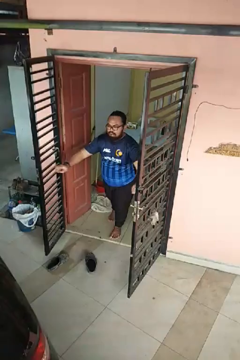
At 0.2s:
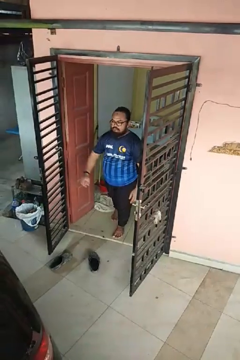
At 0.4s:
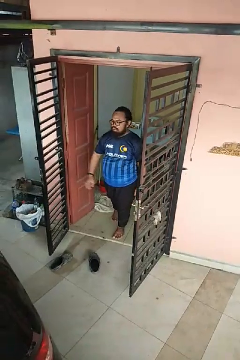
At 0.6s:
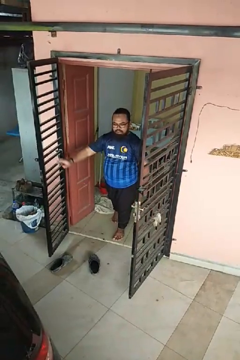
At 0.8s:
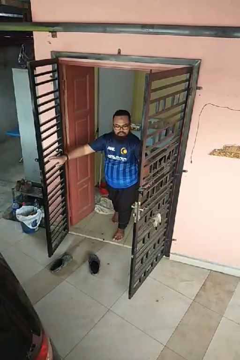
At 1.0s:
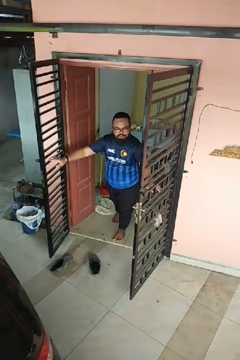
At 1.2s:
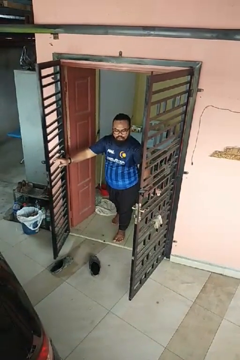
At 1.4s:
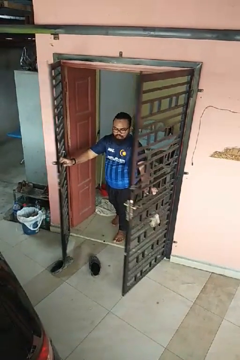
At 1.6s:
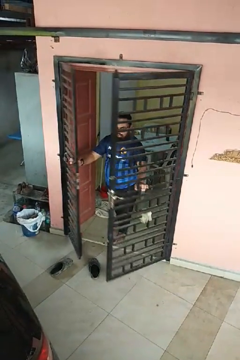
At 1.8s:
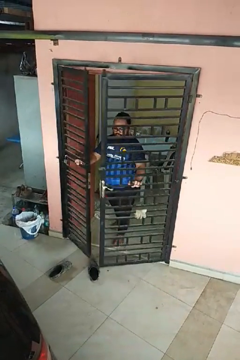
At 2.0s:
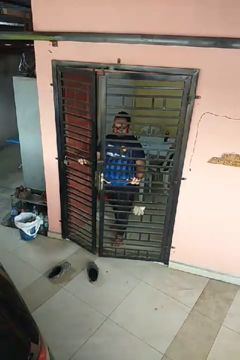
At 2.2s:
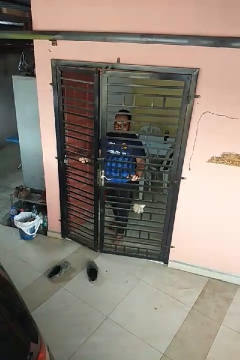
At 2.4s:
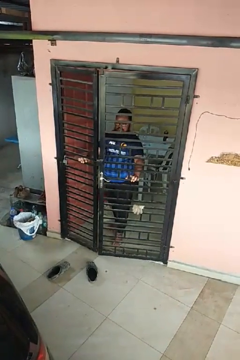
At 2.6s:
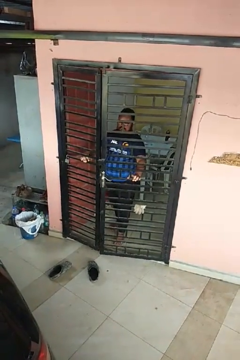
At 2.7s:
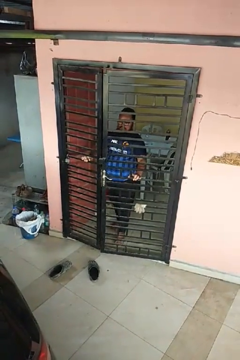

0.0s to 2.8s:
person closes gate

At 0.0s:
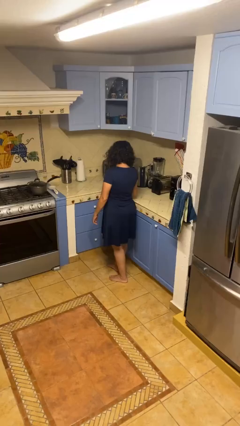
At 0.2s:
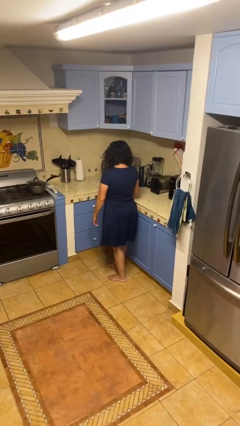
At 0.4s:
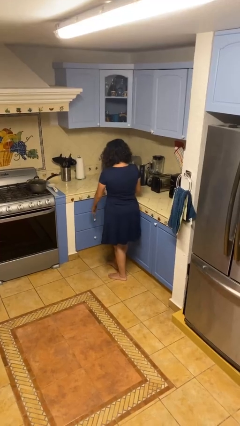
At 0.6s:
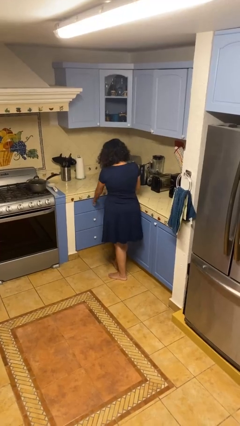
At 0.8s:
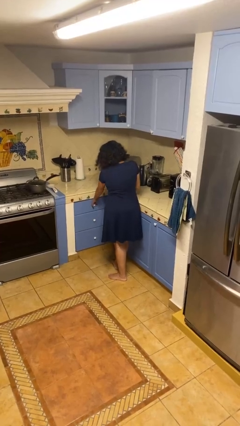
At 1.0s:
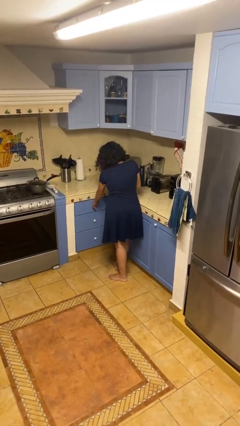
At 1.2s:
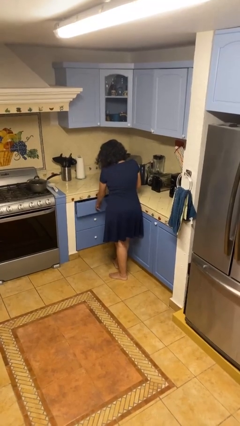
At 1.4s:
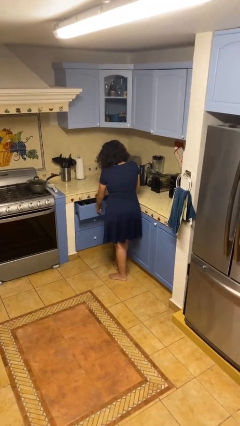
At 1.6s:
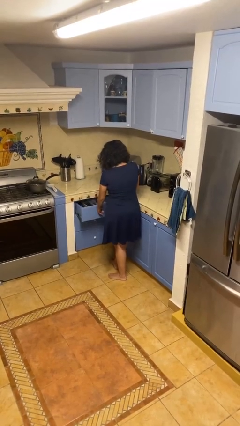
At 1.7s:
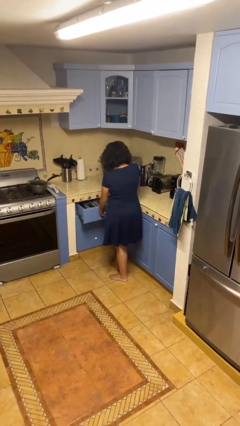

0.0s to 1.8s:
person opens kitchen drawer

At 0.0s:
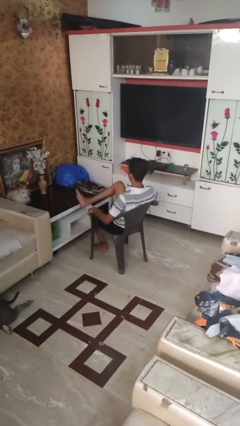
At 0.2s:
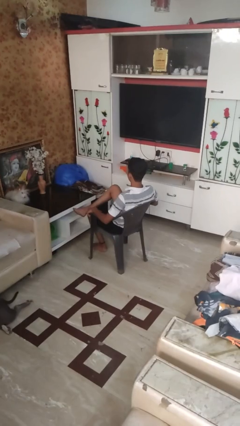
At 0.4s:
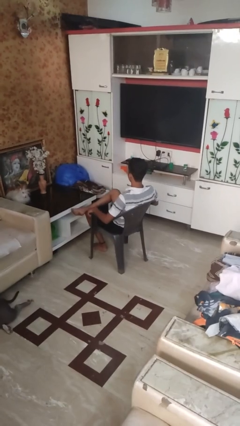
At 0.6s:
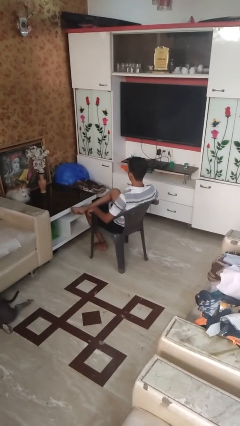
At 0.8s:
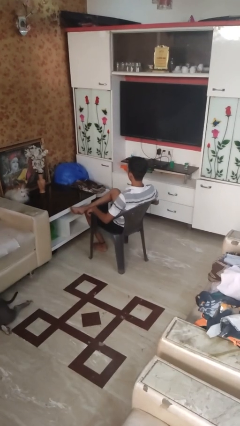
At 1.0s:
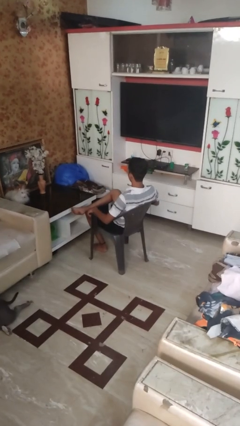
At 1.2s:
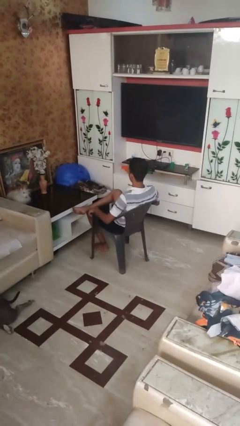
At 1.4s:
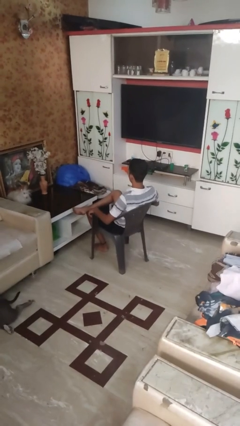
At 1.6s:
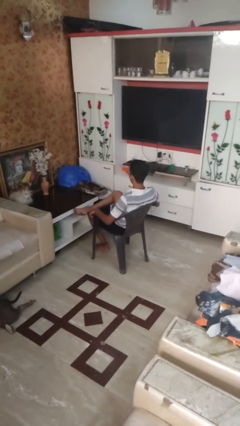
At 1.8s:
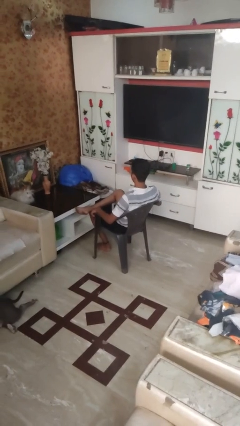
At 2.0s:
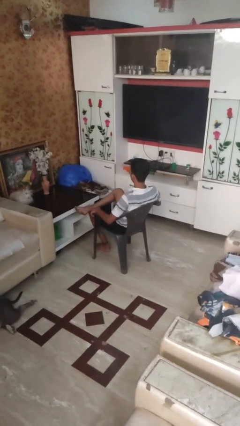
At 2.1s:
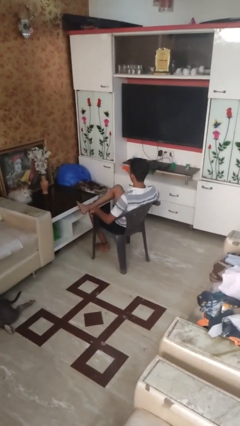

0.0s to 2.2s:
person crosses legs

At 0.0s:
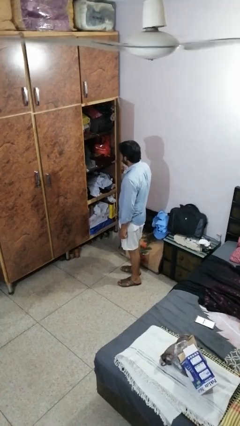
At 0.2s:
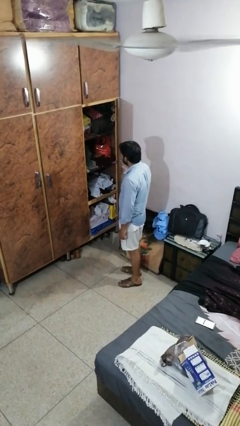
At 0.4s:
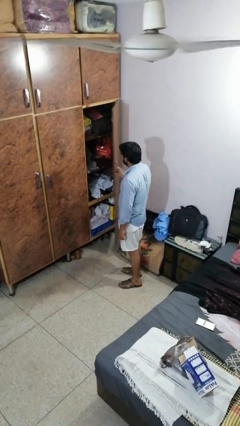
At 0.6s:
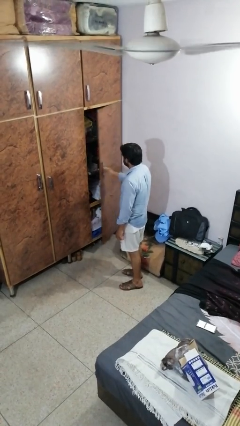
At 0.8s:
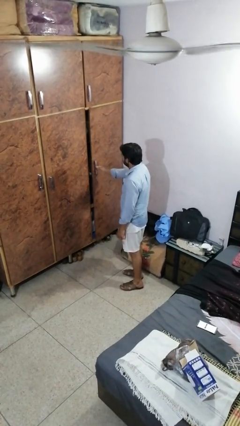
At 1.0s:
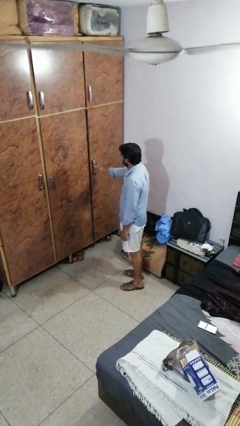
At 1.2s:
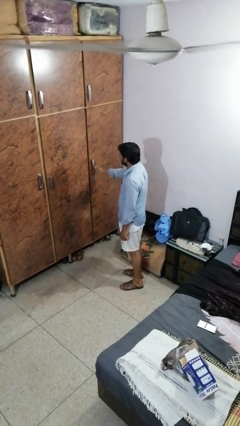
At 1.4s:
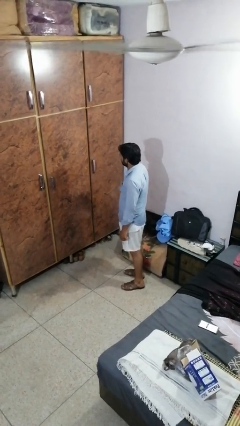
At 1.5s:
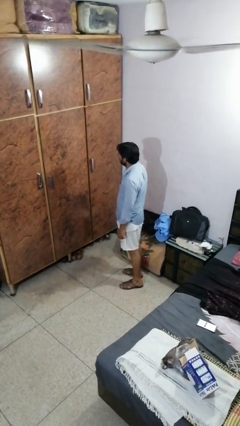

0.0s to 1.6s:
person closes closet door

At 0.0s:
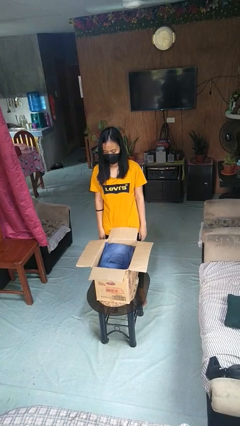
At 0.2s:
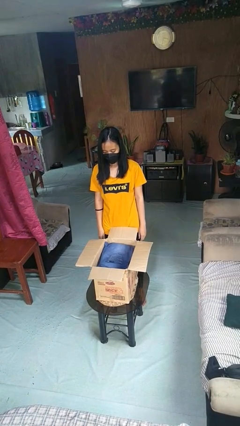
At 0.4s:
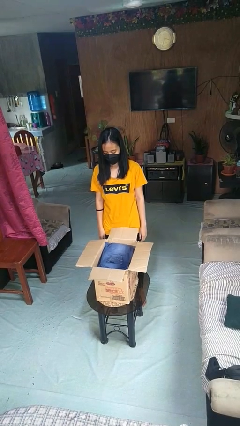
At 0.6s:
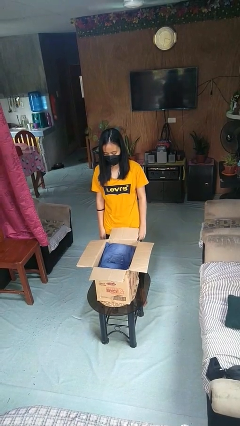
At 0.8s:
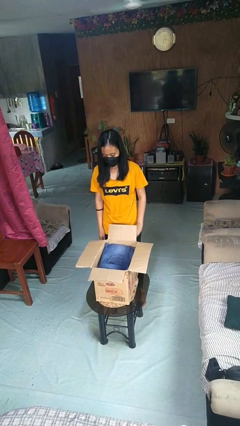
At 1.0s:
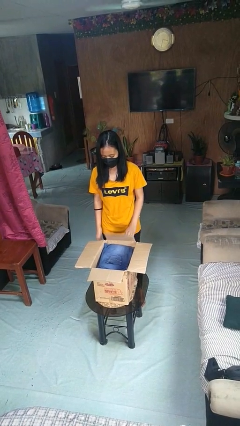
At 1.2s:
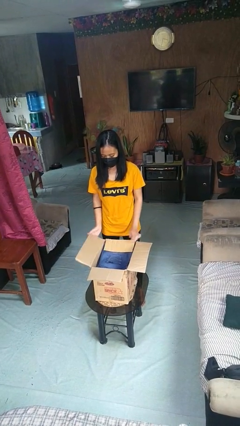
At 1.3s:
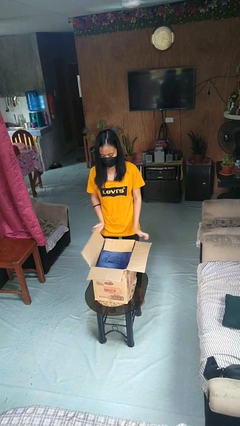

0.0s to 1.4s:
person closes box

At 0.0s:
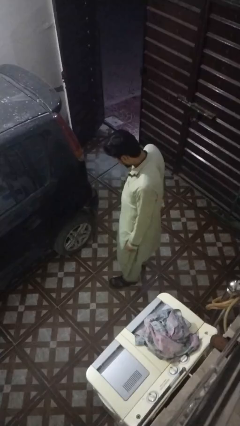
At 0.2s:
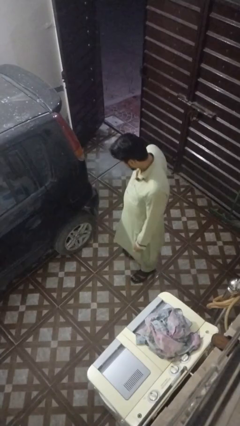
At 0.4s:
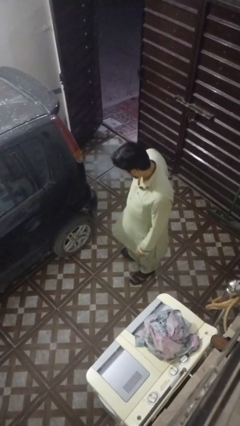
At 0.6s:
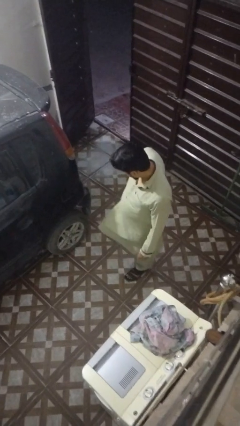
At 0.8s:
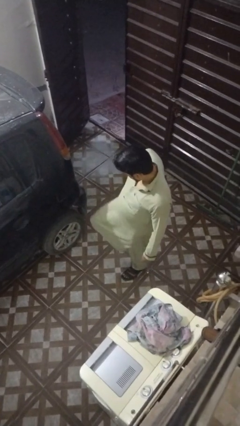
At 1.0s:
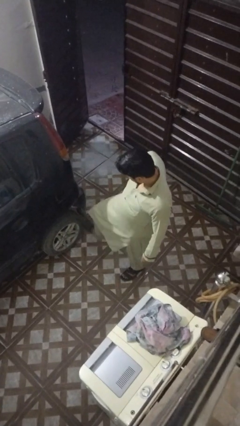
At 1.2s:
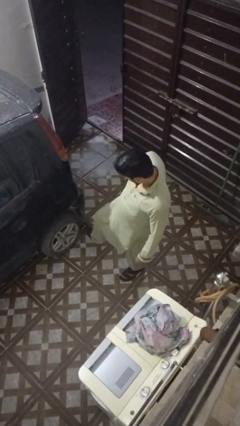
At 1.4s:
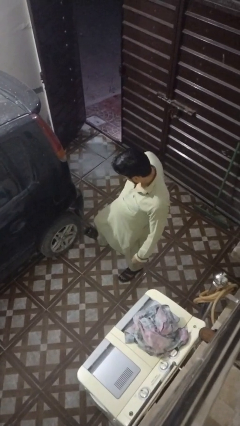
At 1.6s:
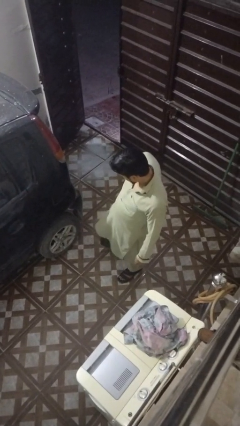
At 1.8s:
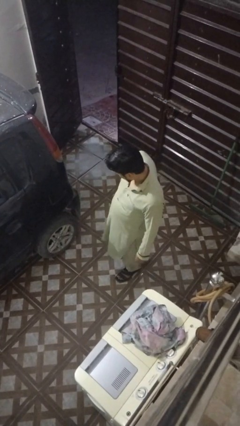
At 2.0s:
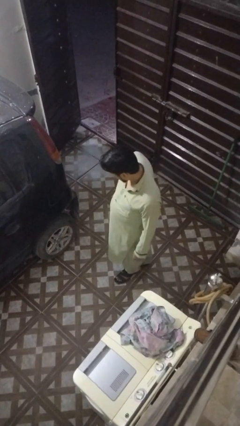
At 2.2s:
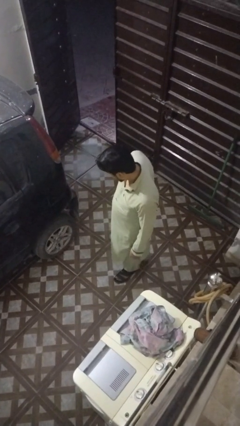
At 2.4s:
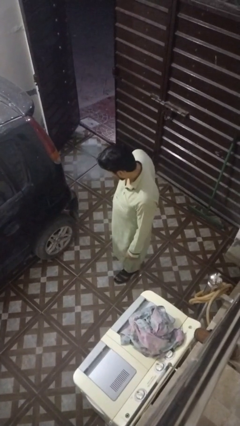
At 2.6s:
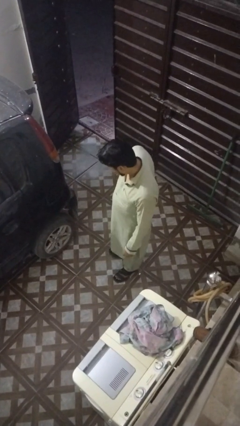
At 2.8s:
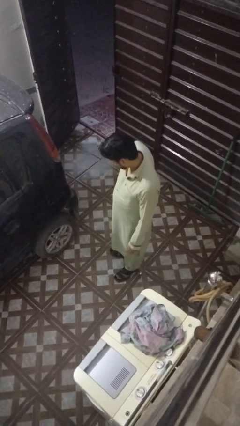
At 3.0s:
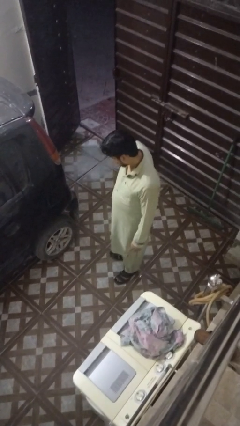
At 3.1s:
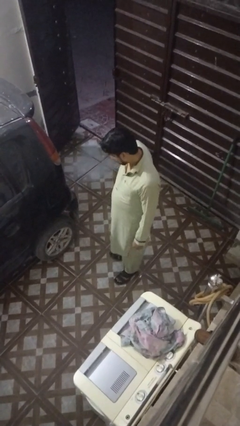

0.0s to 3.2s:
person kicks car tires

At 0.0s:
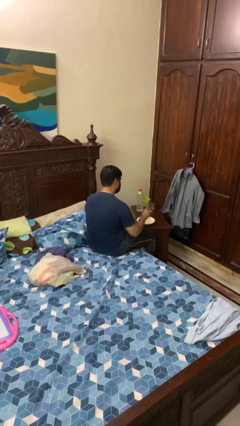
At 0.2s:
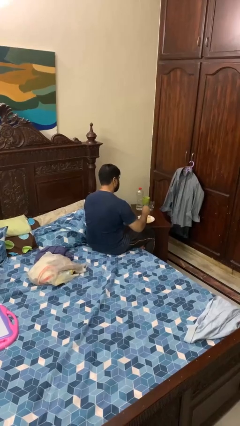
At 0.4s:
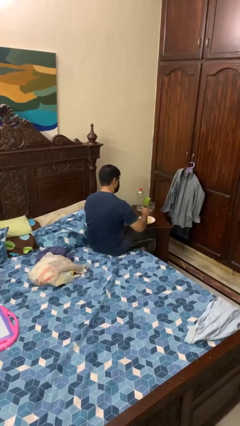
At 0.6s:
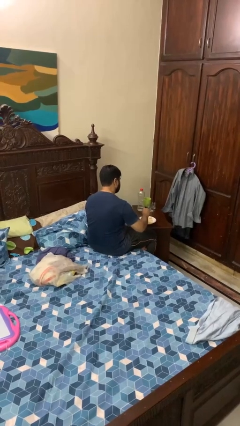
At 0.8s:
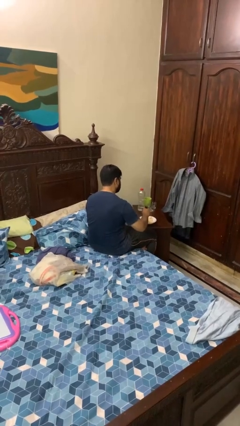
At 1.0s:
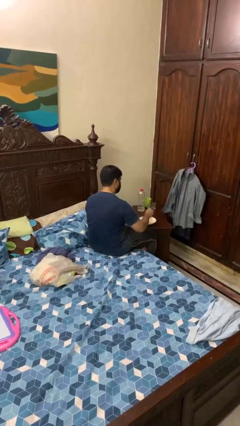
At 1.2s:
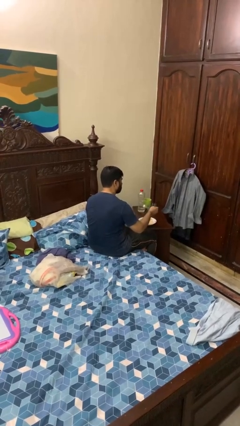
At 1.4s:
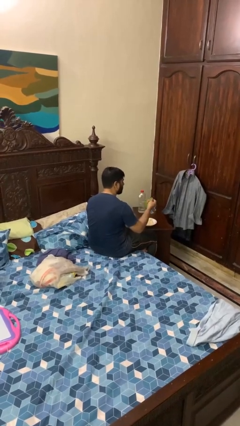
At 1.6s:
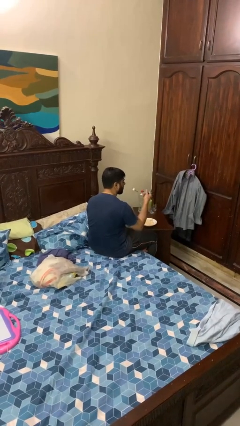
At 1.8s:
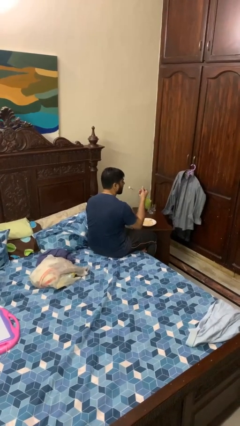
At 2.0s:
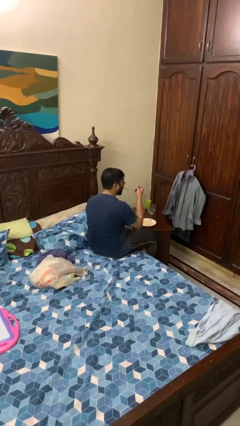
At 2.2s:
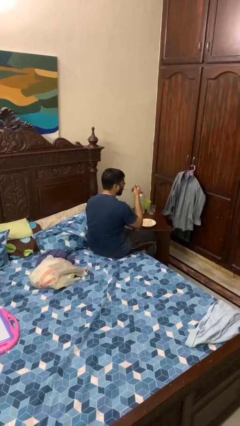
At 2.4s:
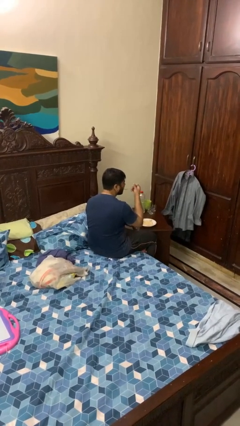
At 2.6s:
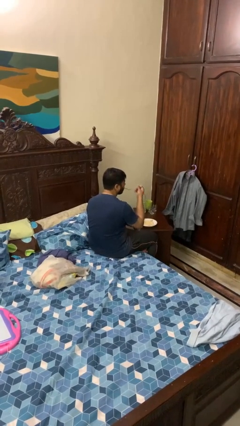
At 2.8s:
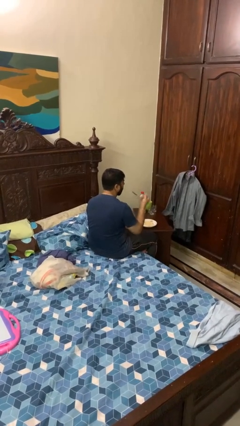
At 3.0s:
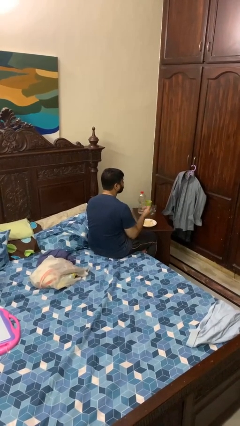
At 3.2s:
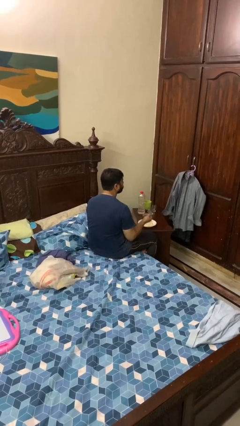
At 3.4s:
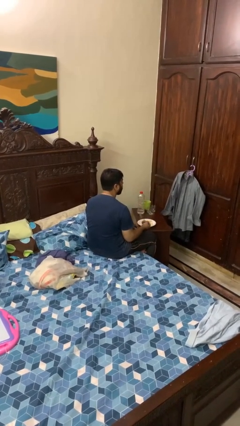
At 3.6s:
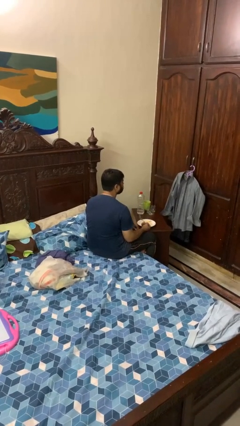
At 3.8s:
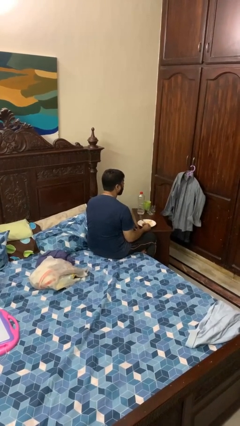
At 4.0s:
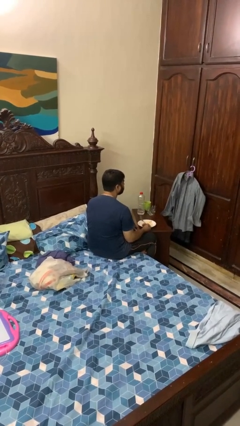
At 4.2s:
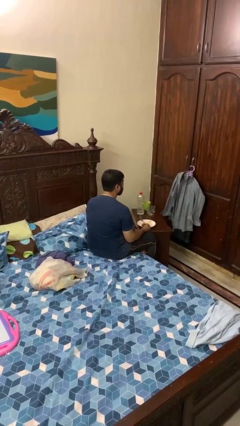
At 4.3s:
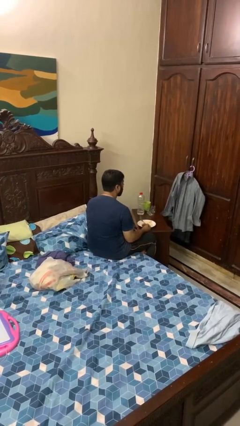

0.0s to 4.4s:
person eats with utensil

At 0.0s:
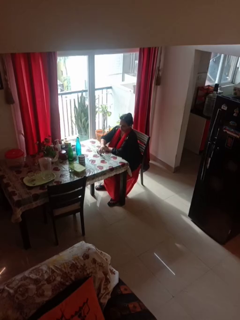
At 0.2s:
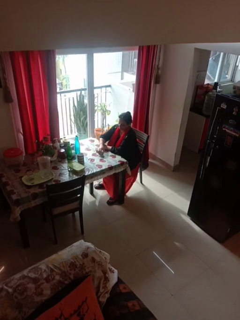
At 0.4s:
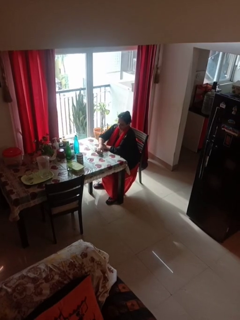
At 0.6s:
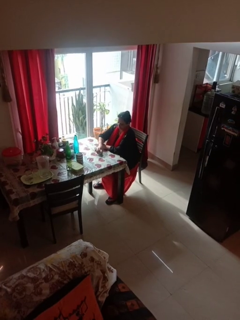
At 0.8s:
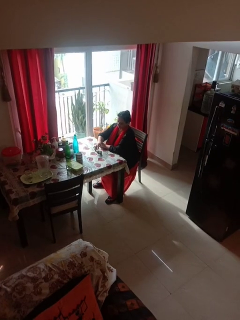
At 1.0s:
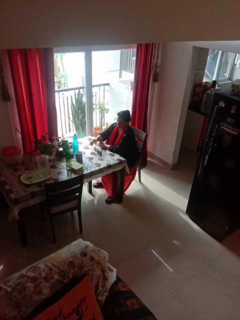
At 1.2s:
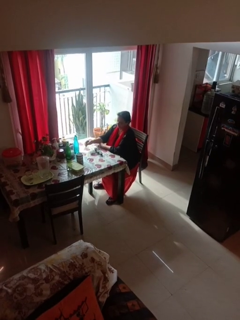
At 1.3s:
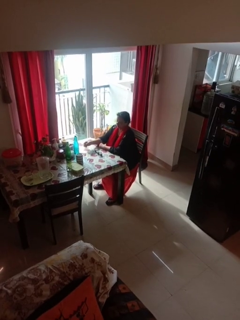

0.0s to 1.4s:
person puts down object on table
